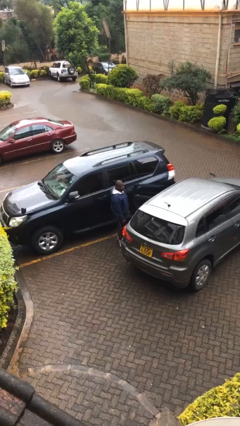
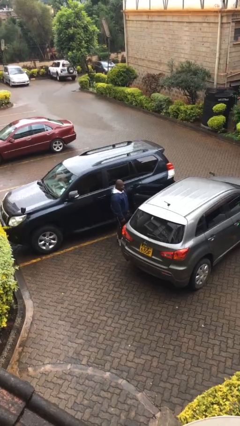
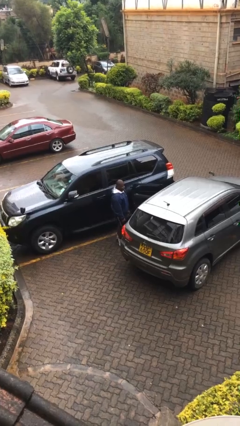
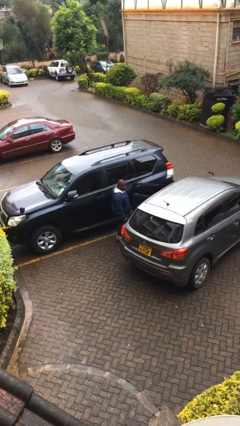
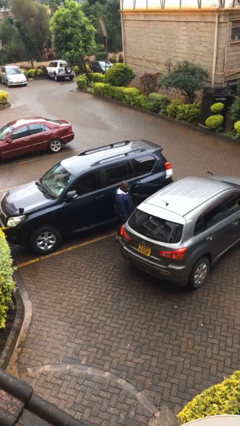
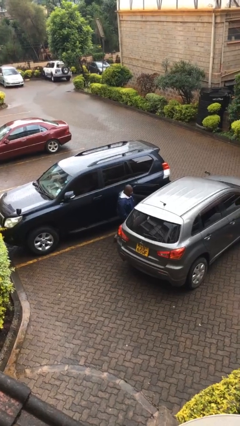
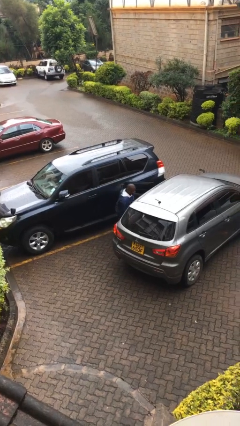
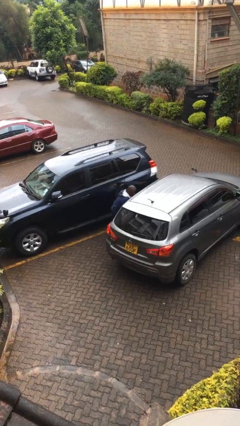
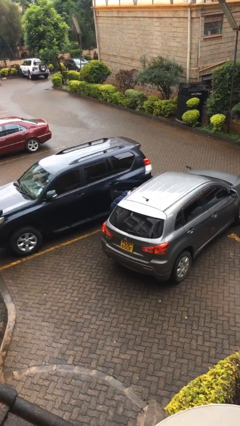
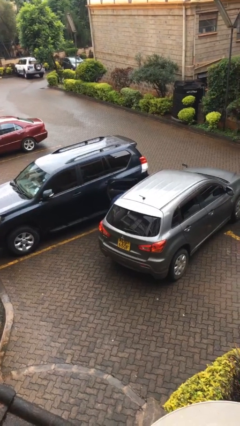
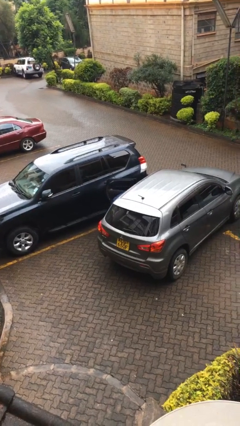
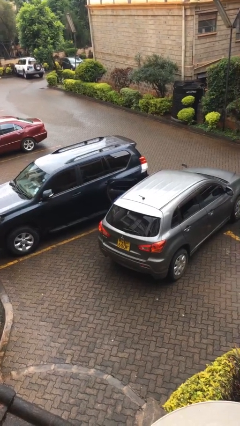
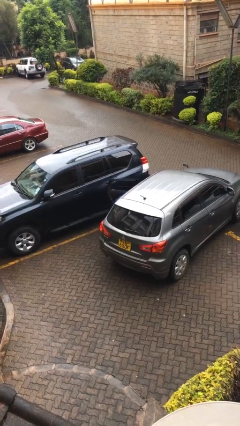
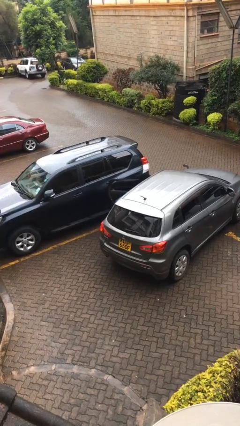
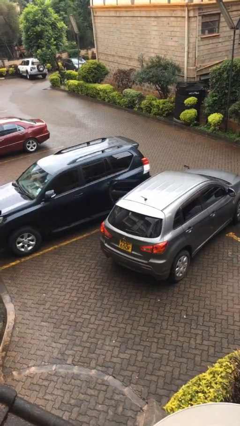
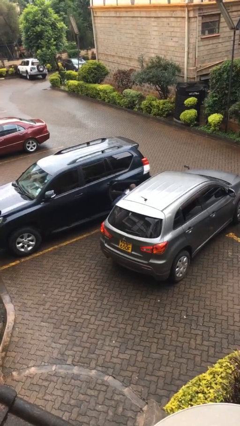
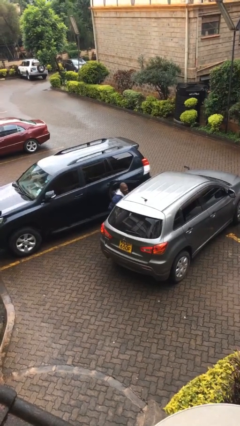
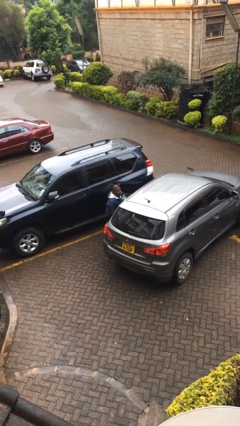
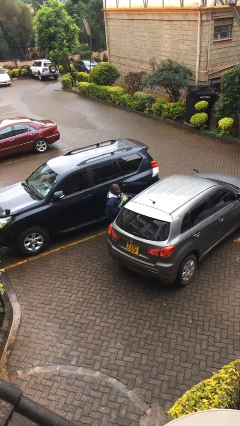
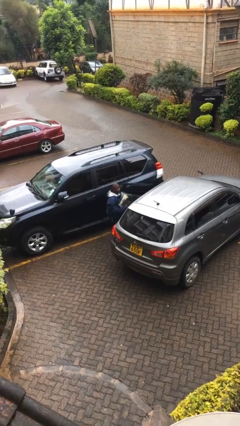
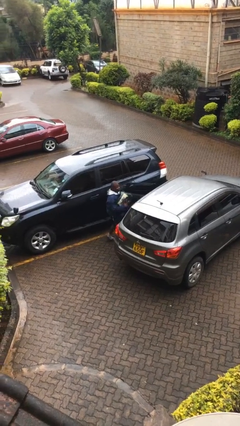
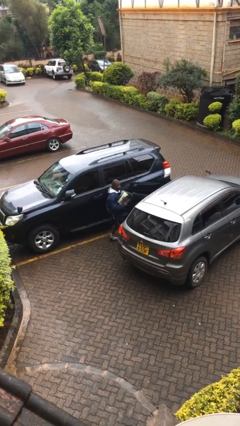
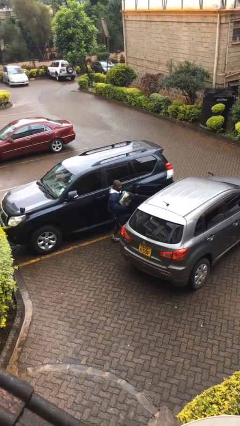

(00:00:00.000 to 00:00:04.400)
person unloads car

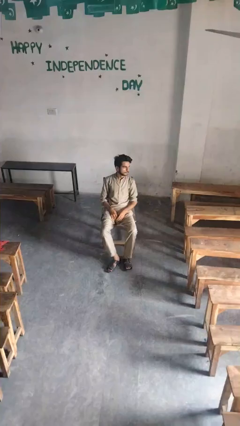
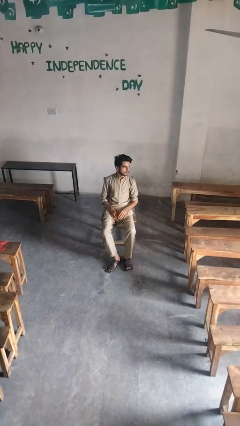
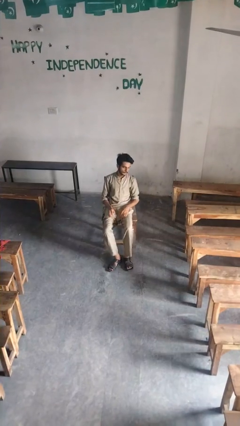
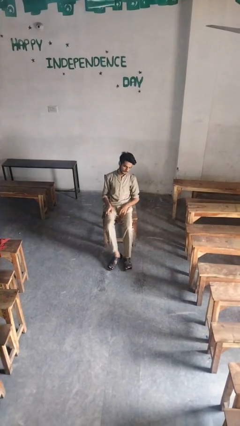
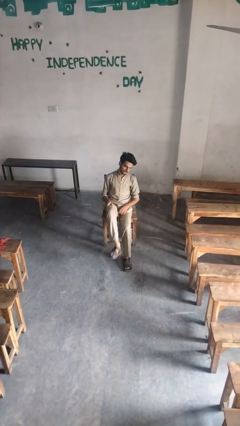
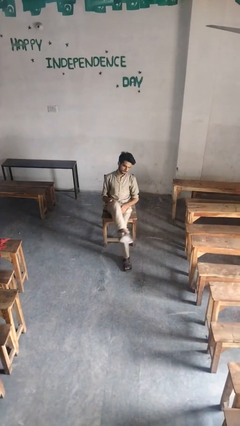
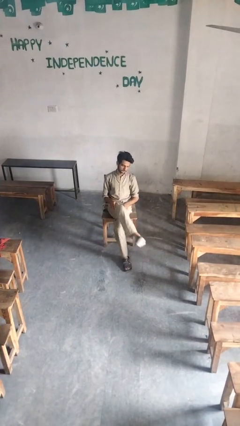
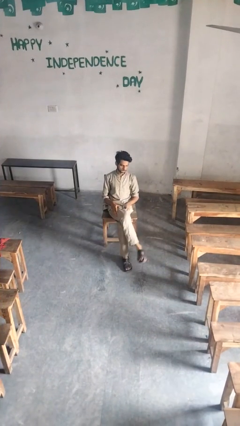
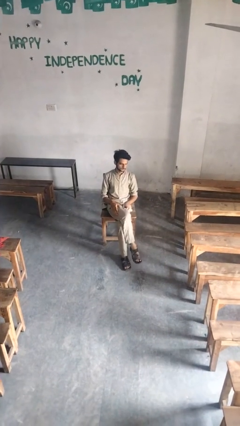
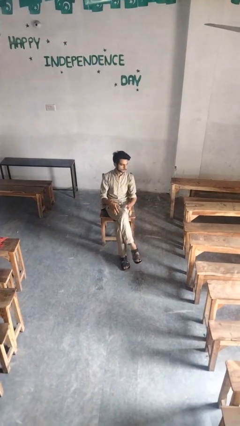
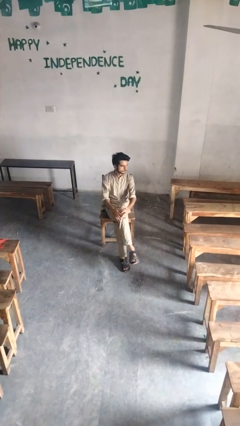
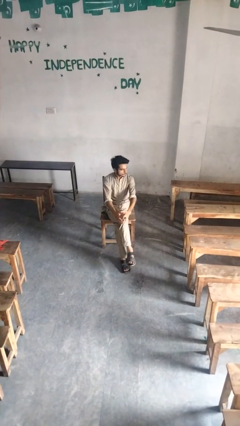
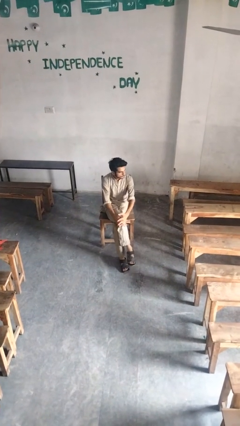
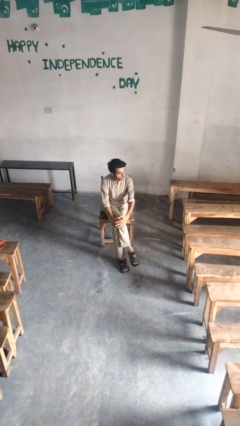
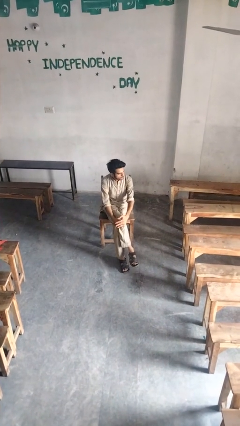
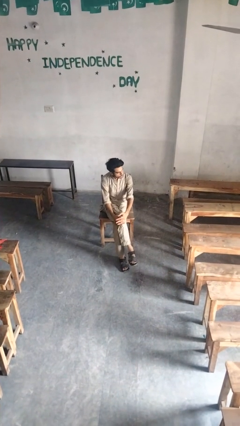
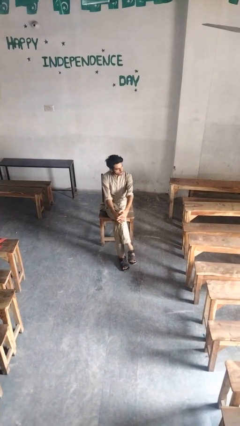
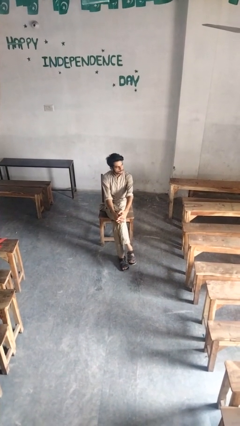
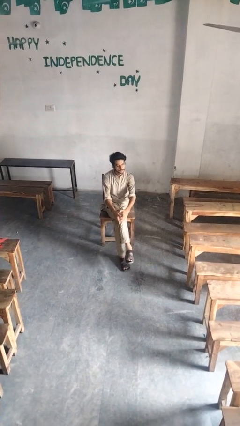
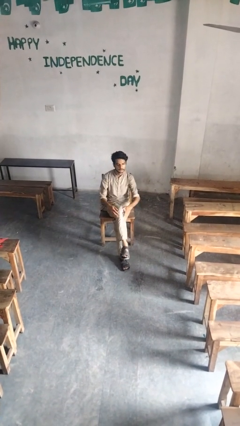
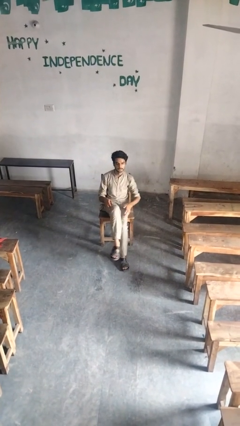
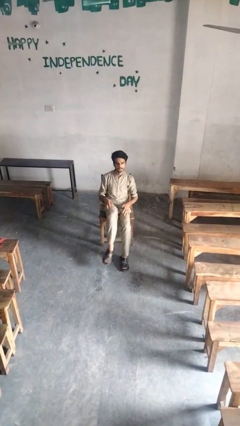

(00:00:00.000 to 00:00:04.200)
person crosses legs

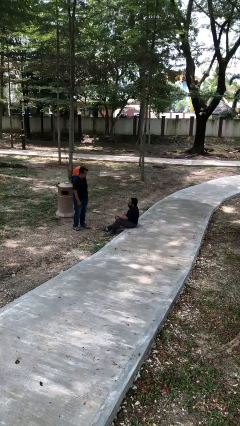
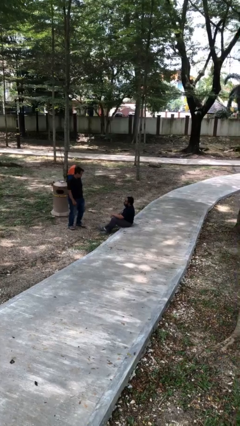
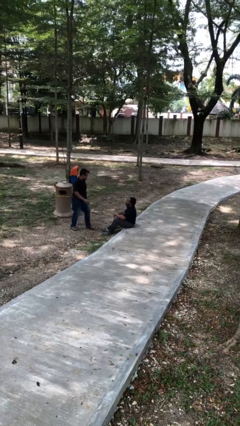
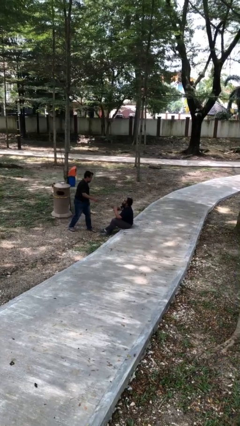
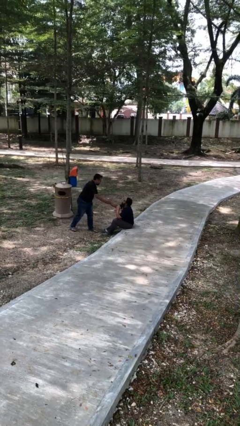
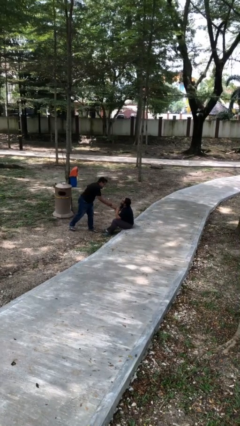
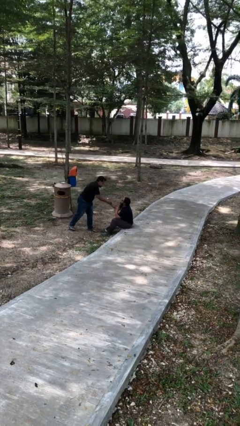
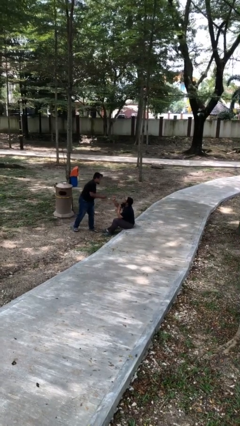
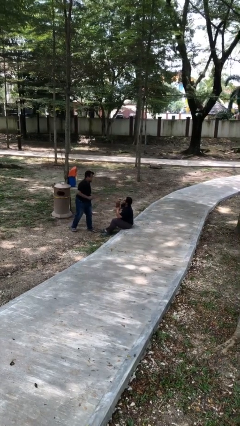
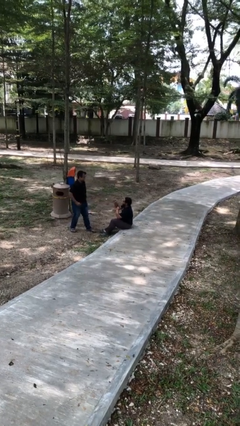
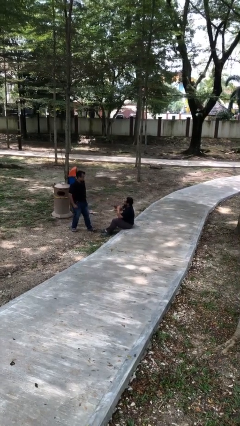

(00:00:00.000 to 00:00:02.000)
person shakes hand

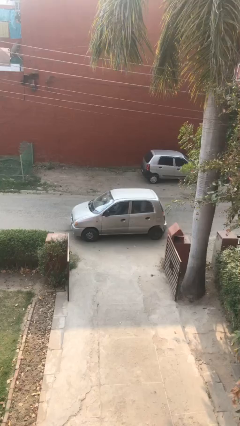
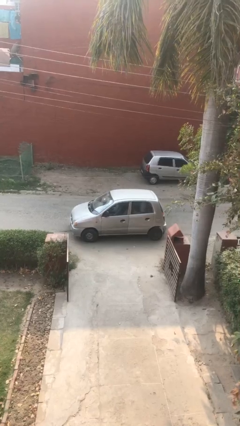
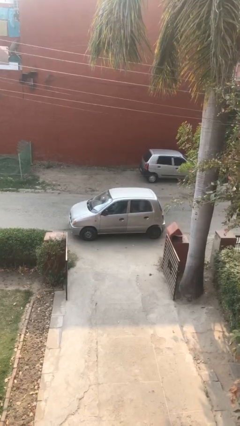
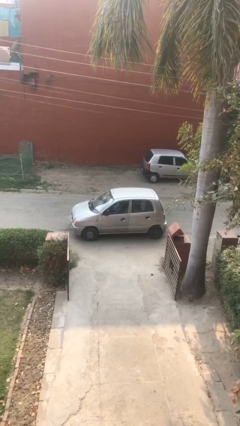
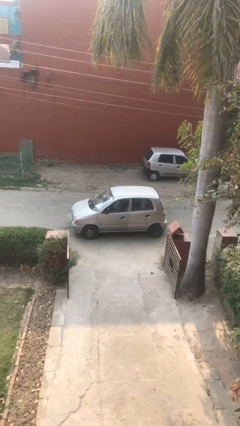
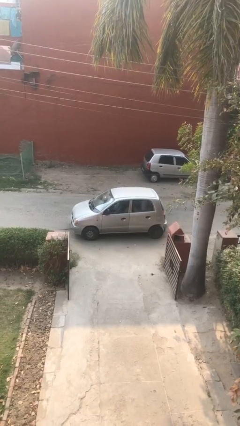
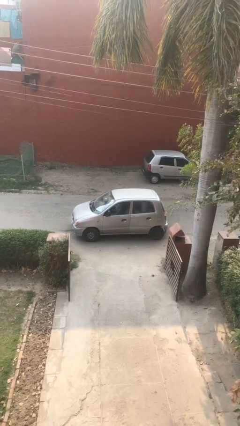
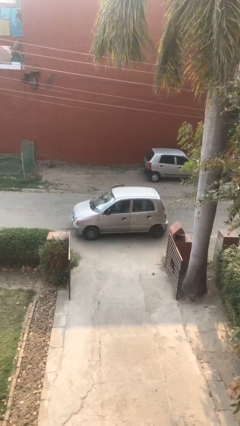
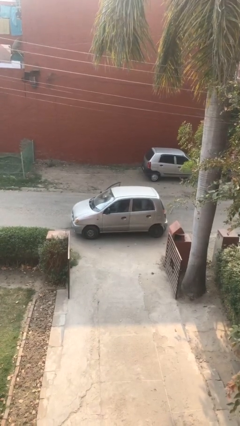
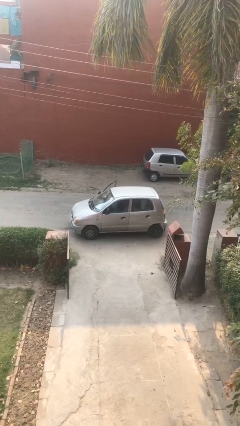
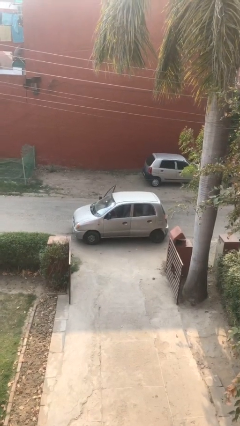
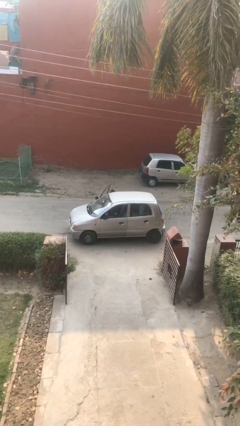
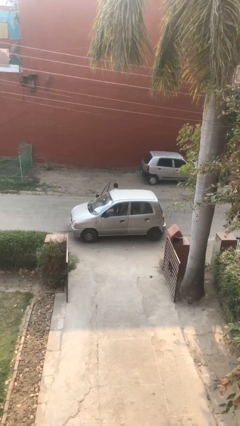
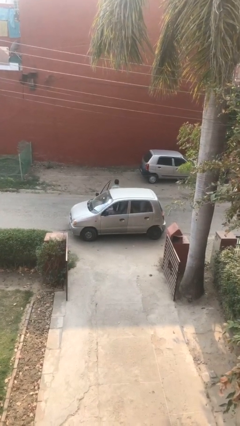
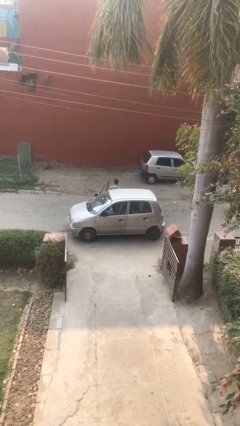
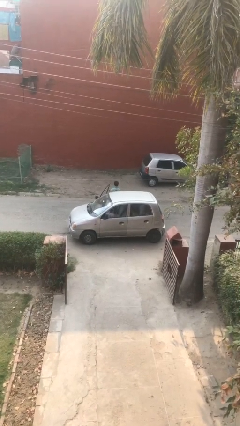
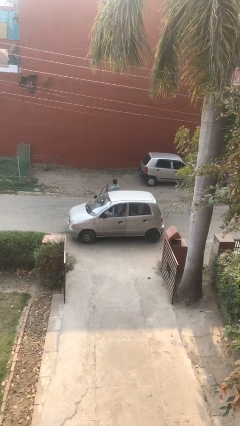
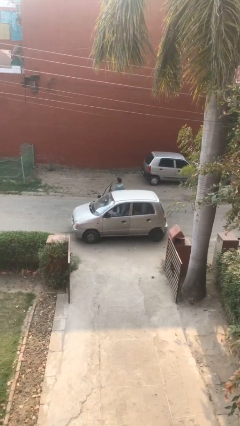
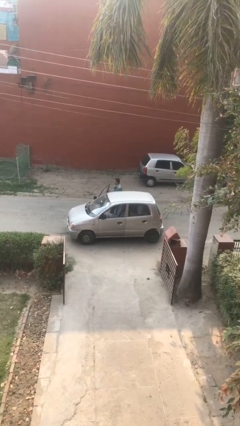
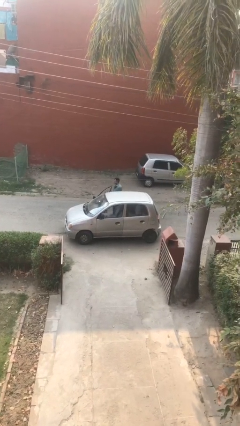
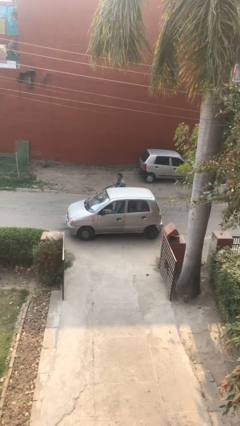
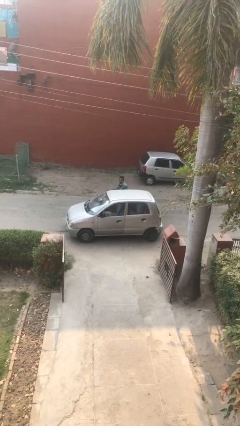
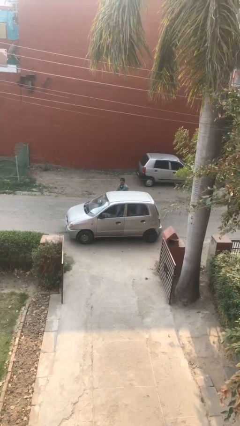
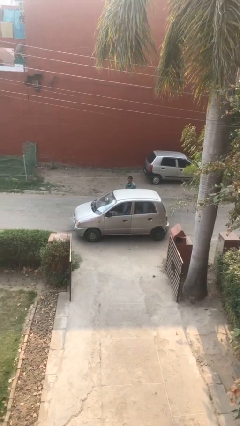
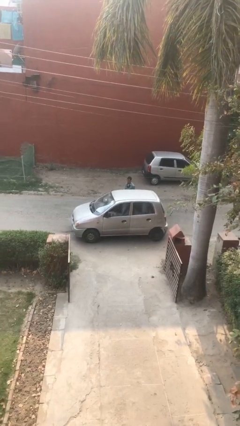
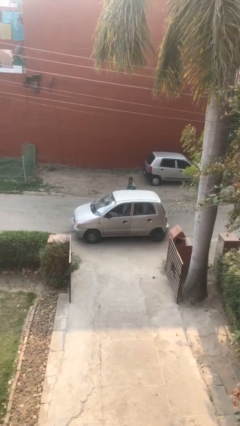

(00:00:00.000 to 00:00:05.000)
car drops off person

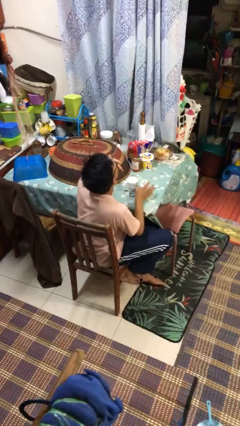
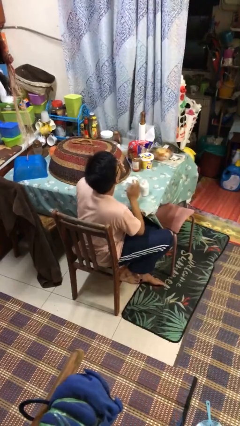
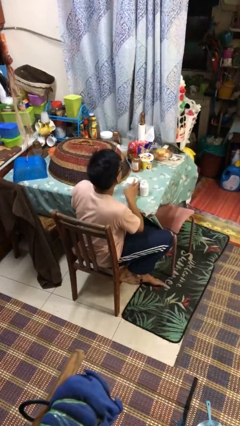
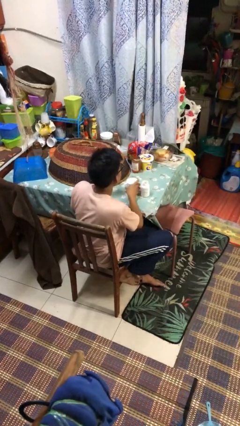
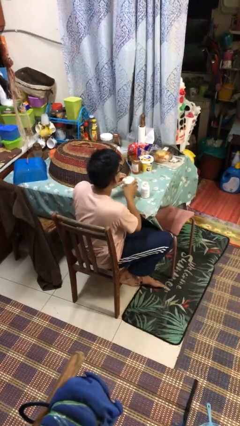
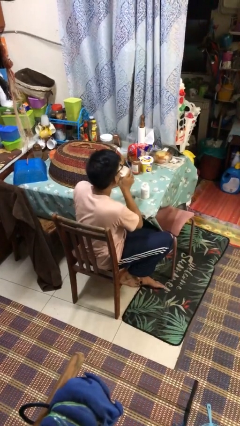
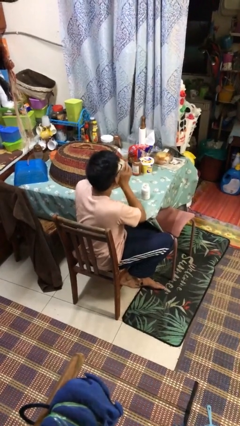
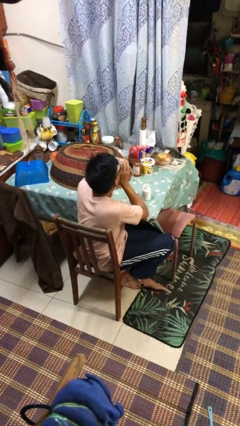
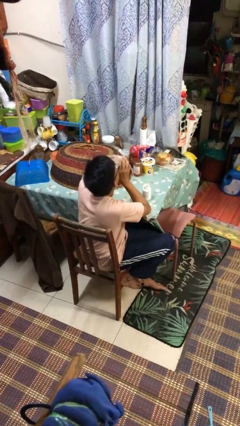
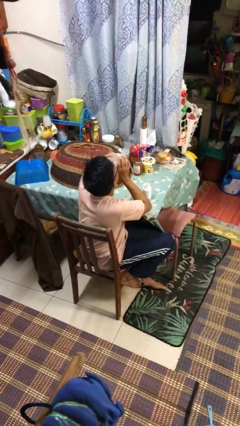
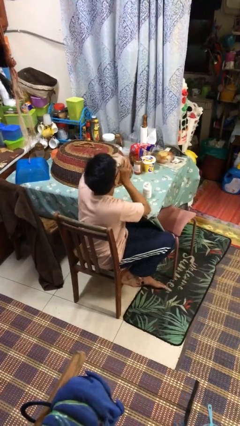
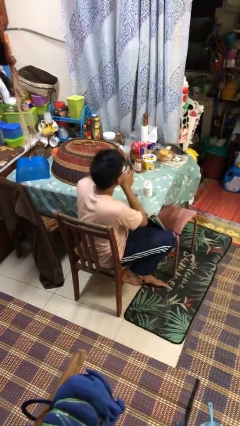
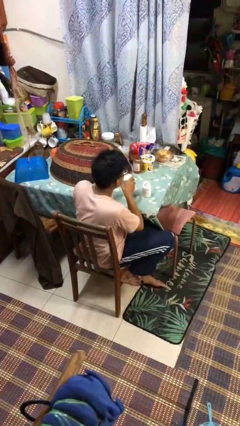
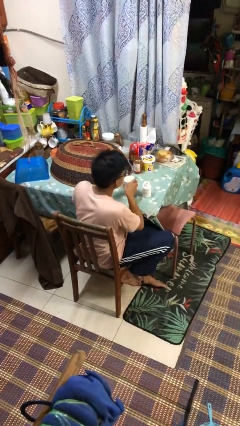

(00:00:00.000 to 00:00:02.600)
person drinks from cup
